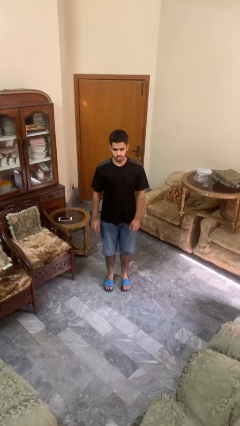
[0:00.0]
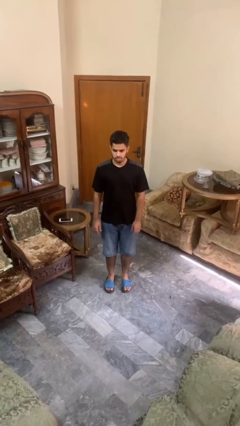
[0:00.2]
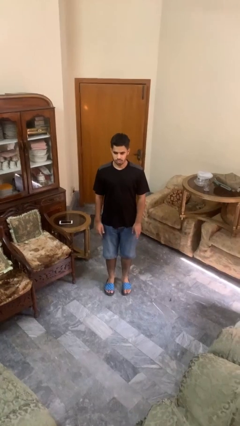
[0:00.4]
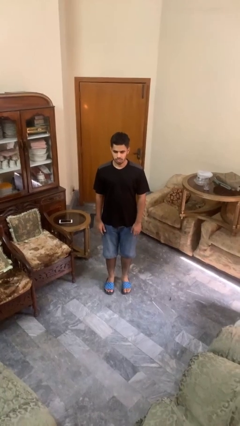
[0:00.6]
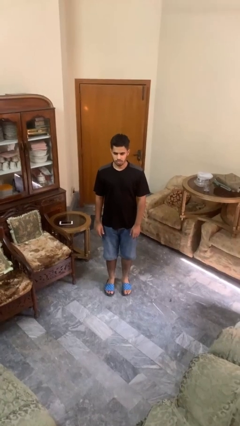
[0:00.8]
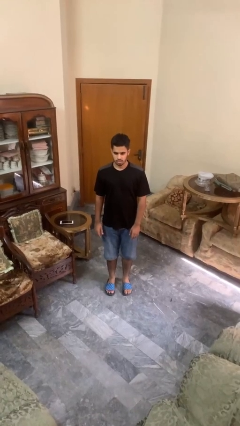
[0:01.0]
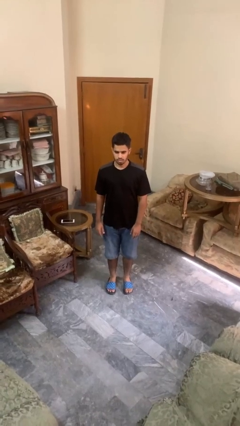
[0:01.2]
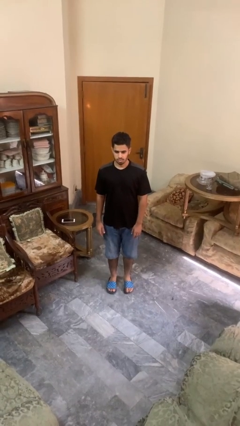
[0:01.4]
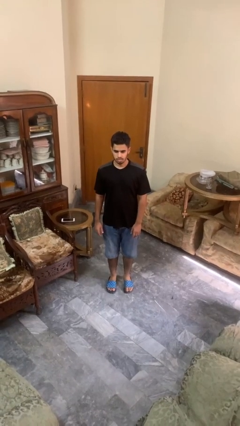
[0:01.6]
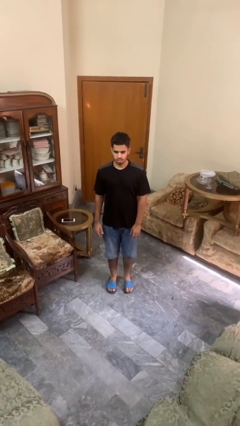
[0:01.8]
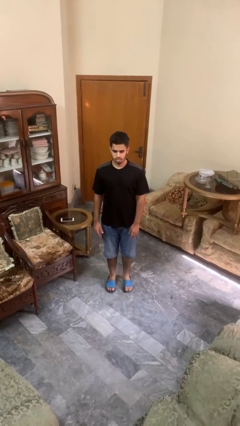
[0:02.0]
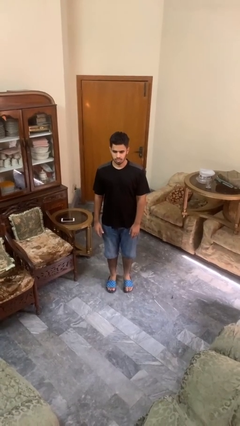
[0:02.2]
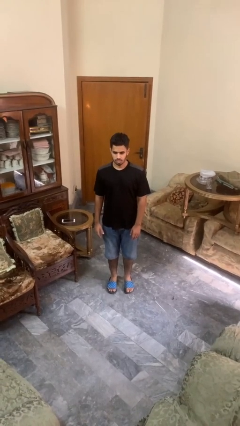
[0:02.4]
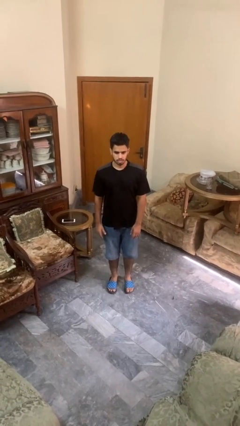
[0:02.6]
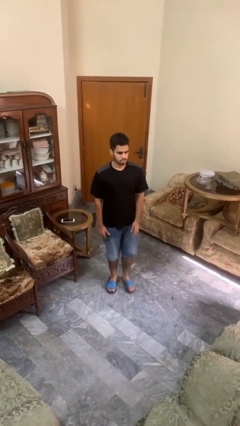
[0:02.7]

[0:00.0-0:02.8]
person twirls

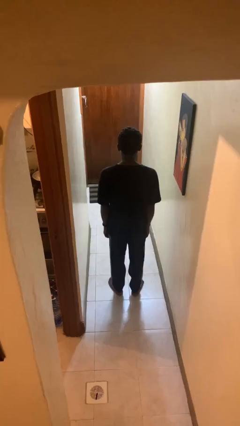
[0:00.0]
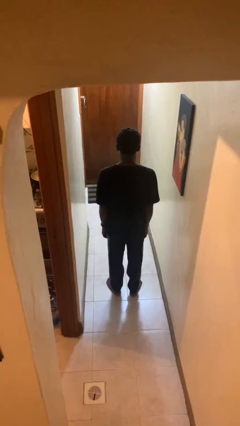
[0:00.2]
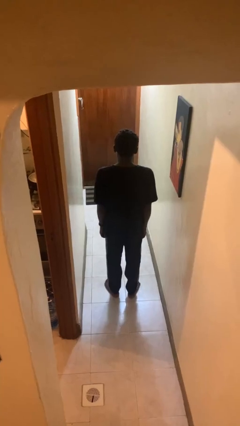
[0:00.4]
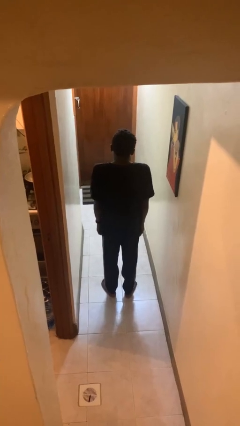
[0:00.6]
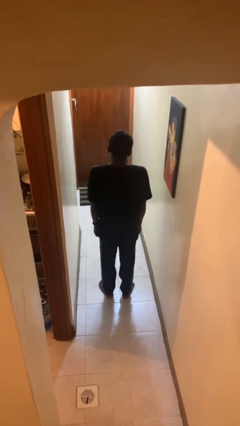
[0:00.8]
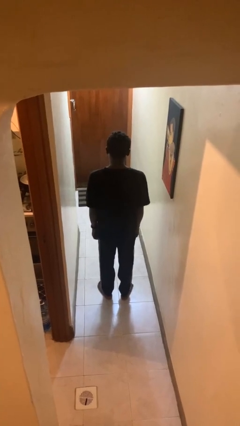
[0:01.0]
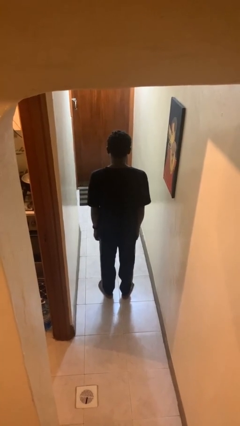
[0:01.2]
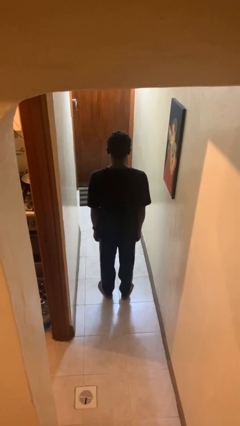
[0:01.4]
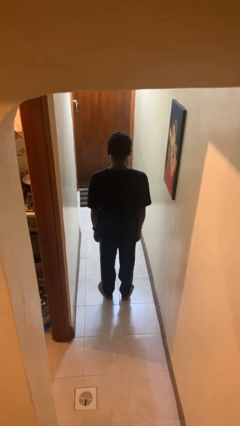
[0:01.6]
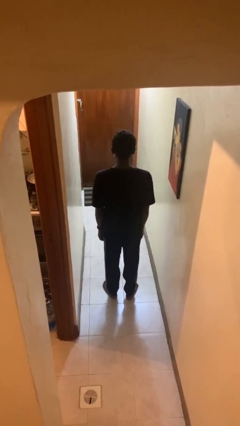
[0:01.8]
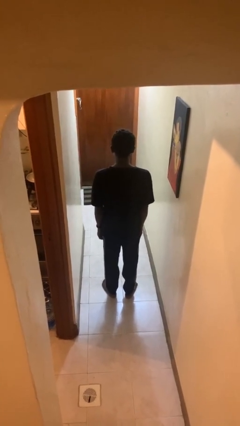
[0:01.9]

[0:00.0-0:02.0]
person shrugs

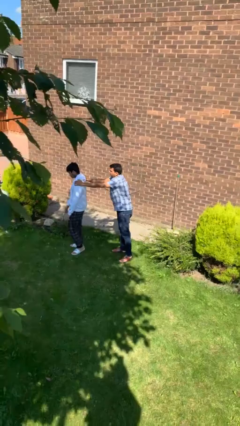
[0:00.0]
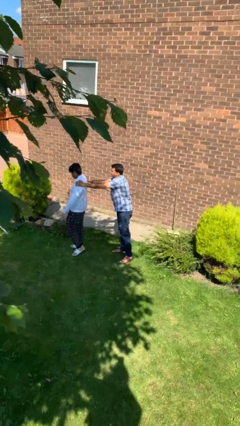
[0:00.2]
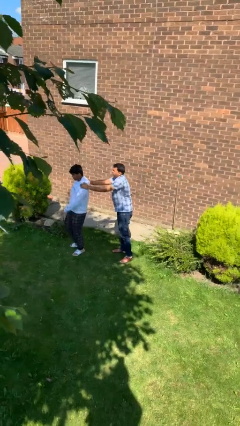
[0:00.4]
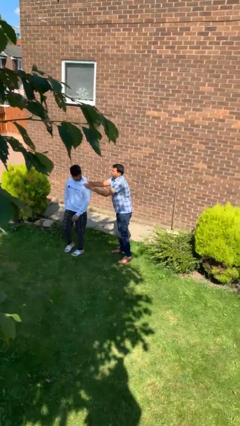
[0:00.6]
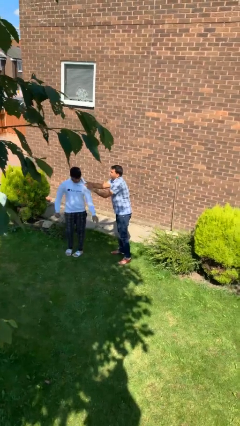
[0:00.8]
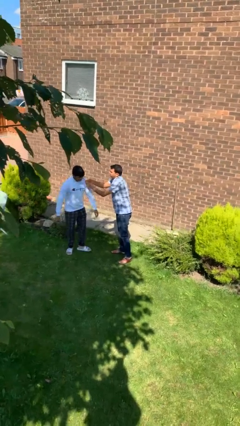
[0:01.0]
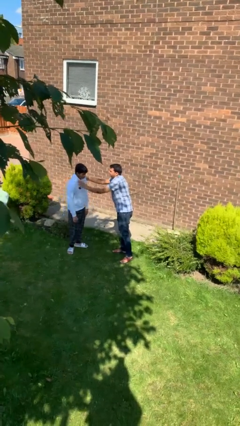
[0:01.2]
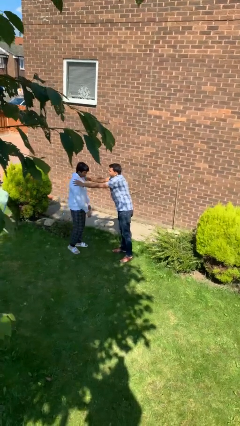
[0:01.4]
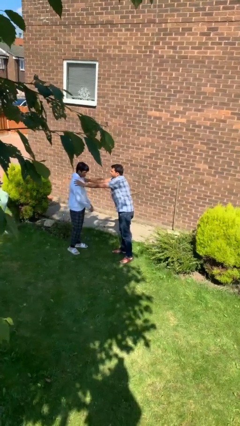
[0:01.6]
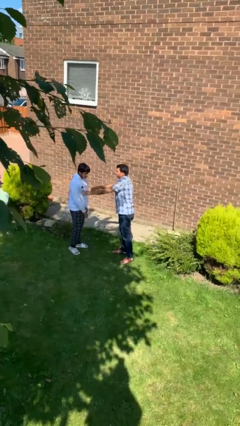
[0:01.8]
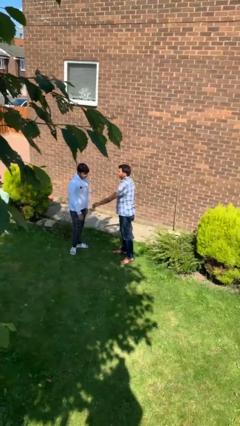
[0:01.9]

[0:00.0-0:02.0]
person spins person around

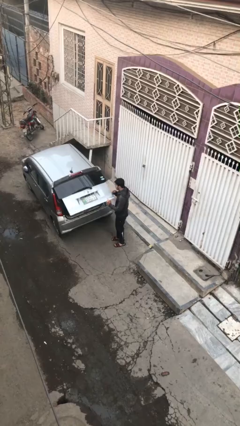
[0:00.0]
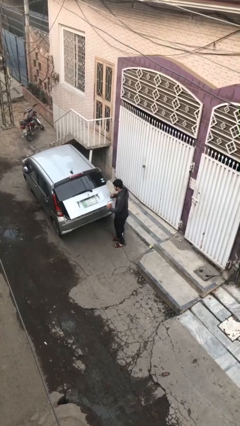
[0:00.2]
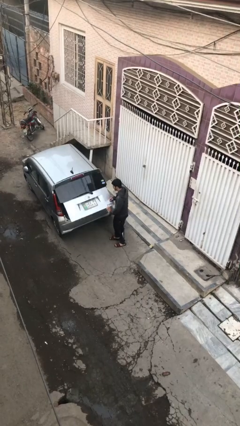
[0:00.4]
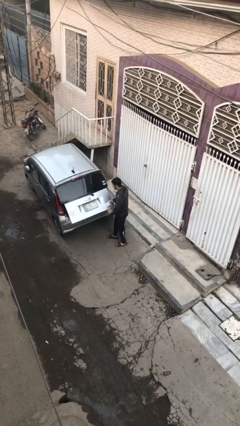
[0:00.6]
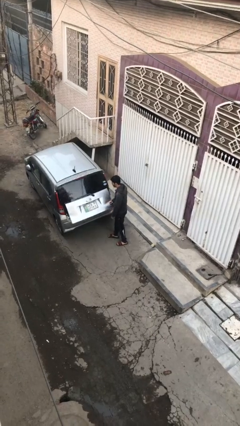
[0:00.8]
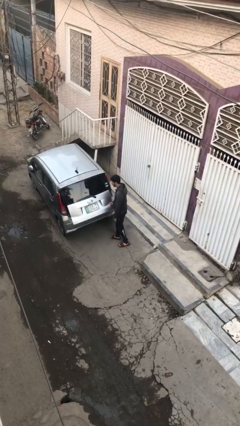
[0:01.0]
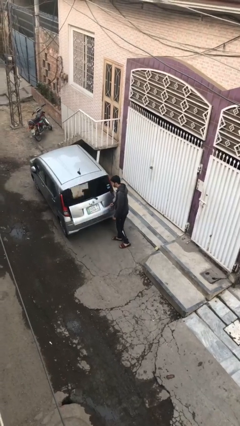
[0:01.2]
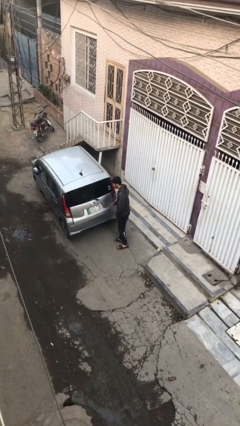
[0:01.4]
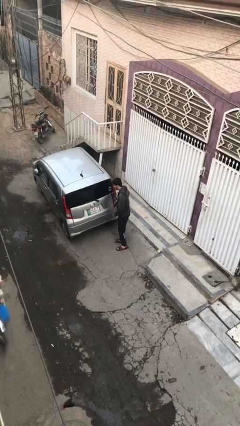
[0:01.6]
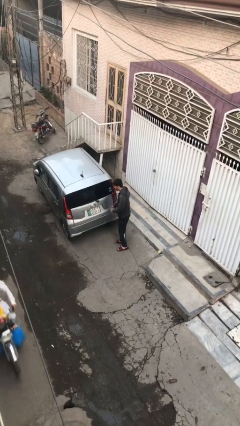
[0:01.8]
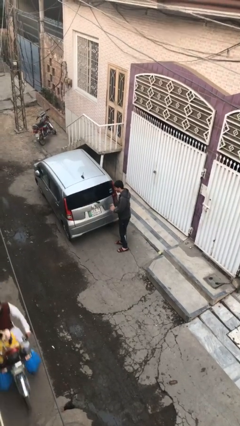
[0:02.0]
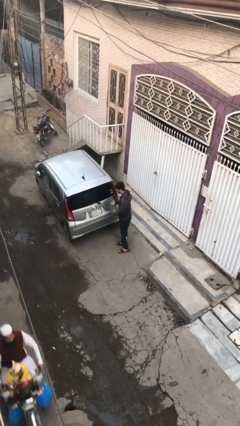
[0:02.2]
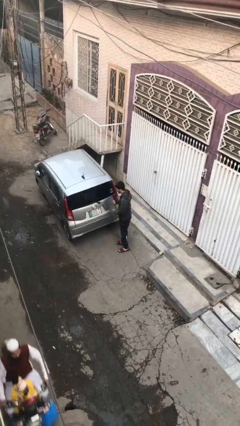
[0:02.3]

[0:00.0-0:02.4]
person closes car trunk

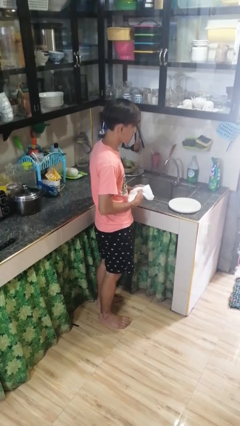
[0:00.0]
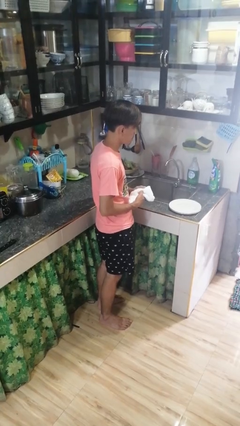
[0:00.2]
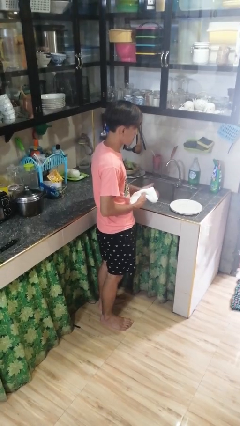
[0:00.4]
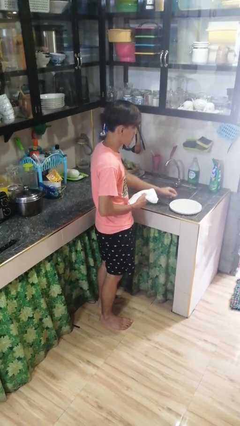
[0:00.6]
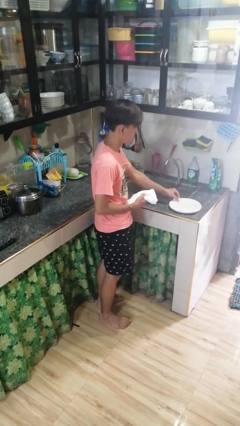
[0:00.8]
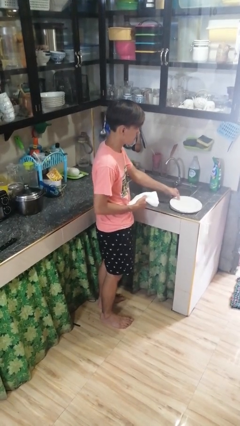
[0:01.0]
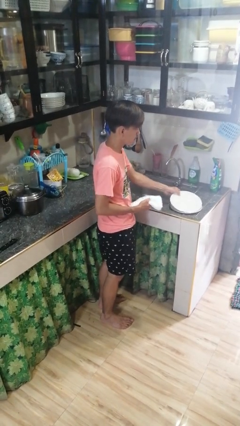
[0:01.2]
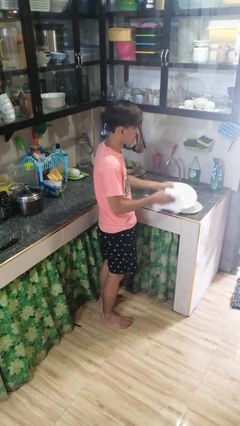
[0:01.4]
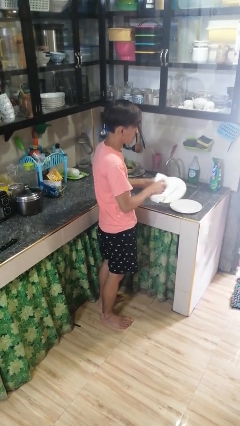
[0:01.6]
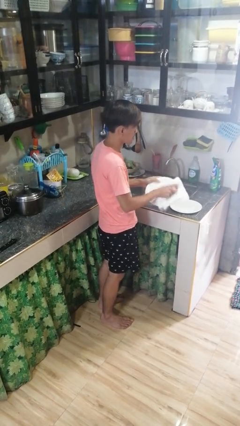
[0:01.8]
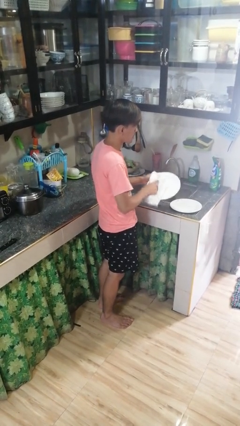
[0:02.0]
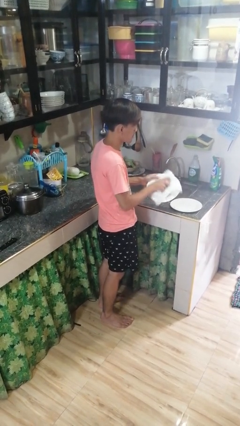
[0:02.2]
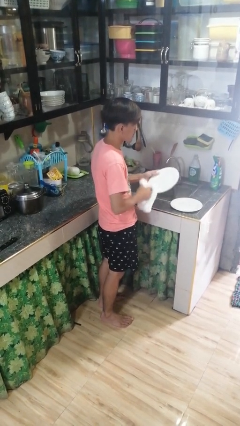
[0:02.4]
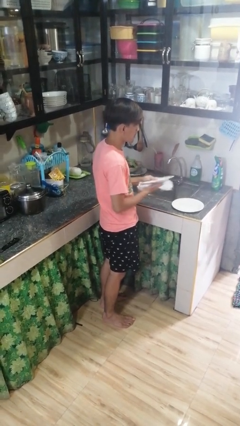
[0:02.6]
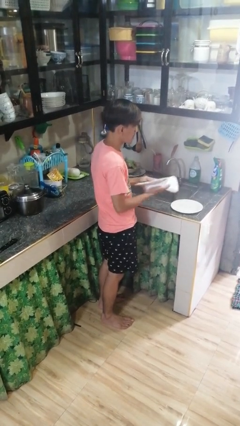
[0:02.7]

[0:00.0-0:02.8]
person dries dish

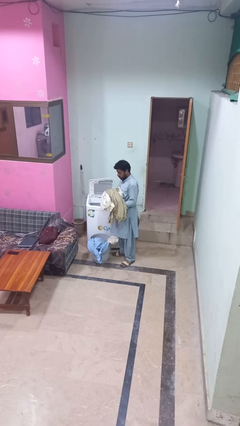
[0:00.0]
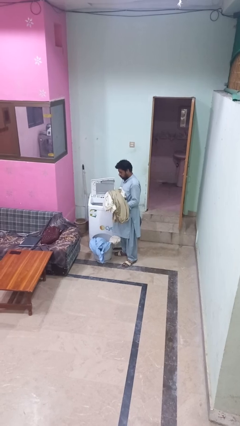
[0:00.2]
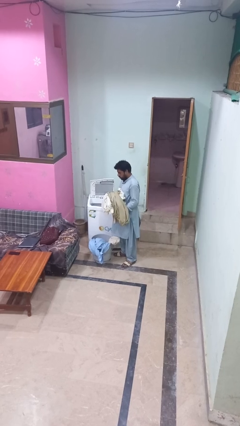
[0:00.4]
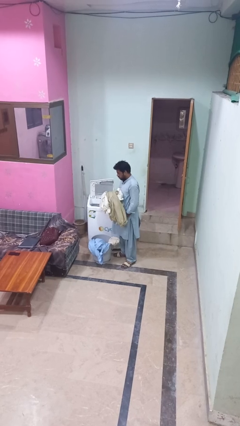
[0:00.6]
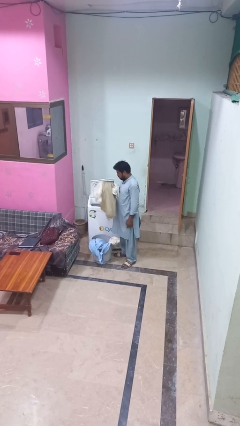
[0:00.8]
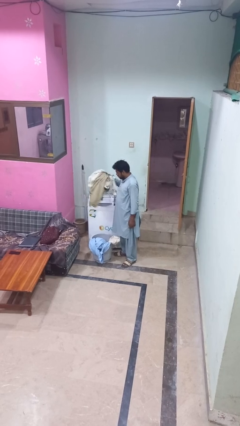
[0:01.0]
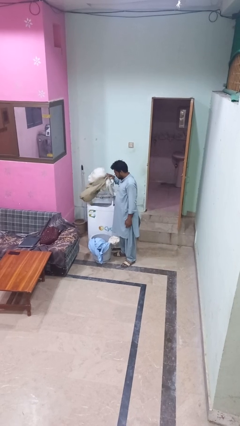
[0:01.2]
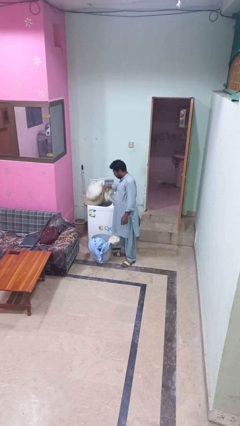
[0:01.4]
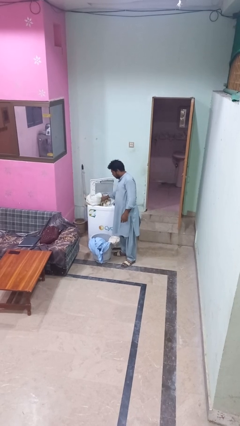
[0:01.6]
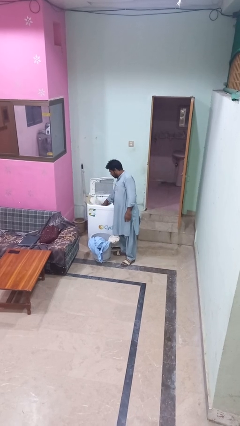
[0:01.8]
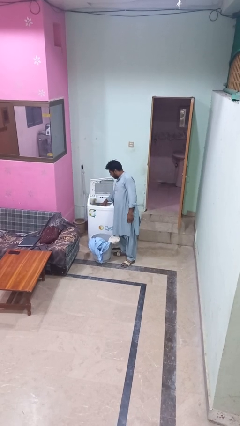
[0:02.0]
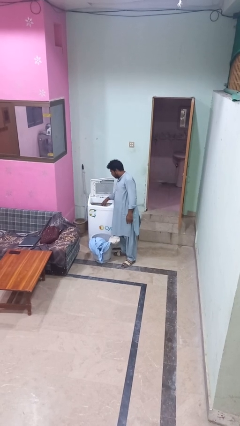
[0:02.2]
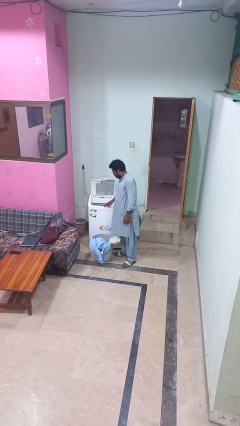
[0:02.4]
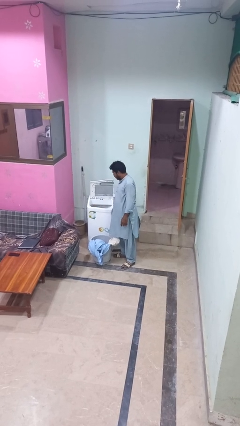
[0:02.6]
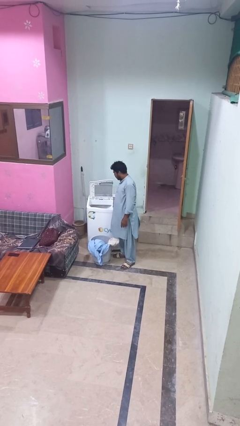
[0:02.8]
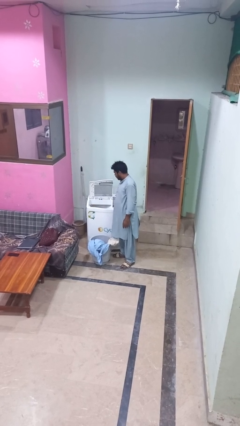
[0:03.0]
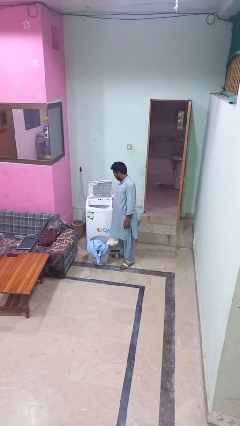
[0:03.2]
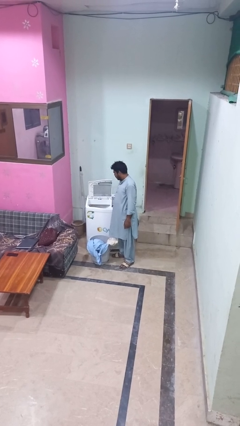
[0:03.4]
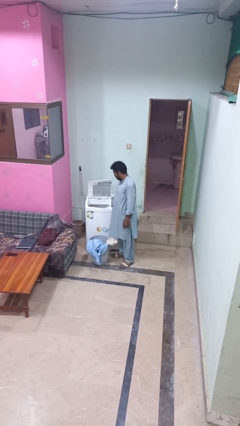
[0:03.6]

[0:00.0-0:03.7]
person loads clotheswasher

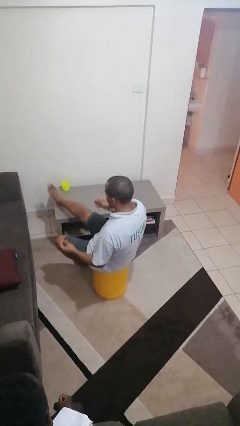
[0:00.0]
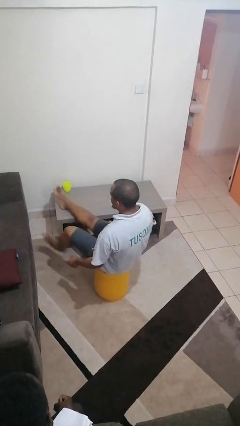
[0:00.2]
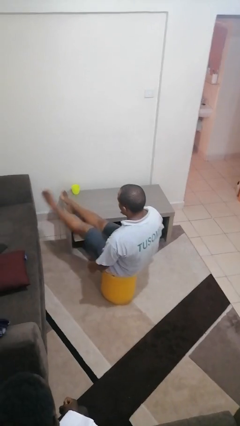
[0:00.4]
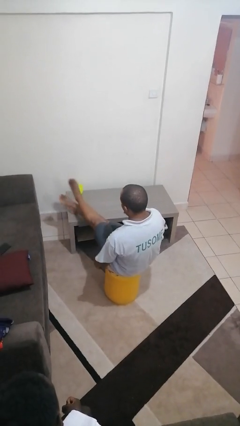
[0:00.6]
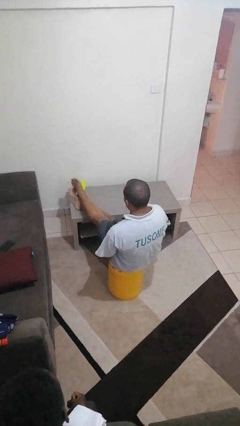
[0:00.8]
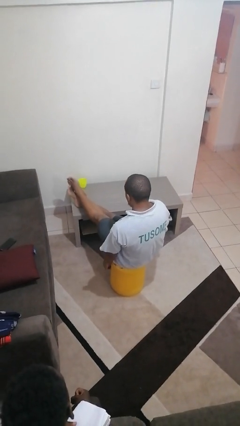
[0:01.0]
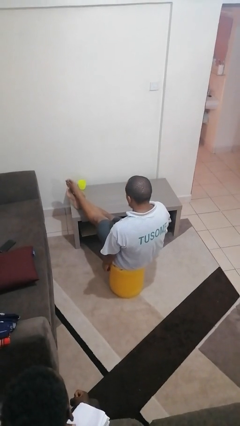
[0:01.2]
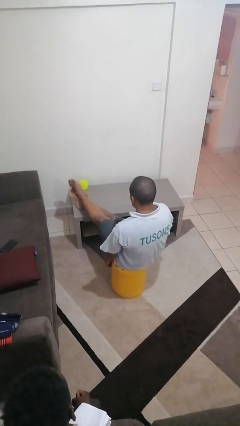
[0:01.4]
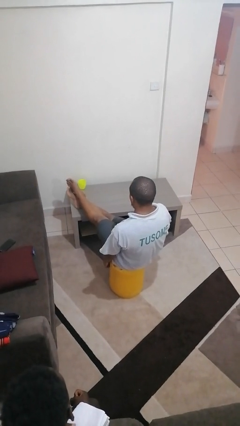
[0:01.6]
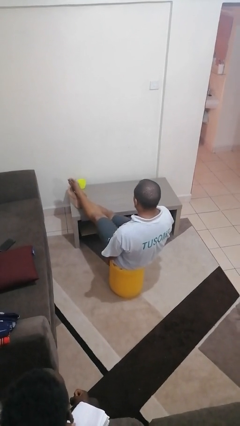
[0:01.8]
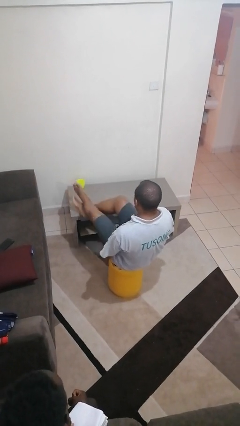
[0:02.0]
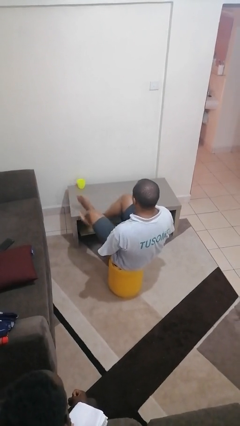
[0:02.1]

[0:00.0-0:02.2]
person puts feet up
